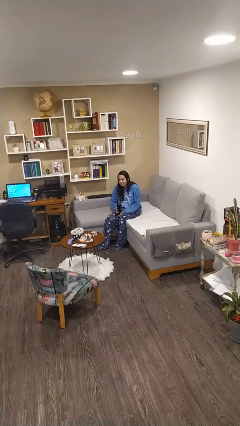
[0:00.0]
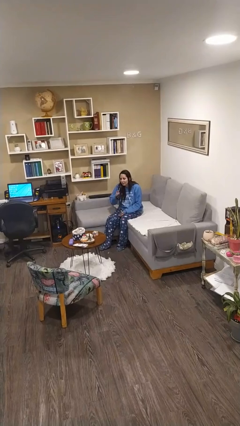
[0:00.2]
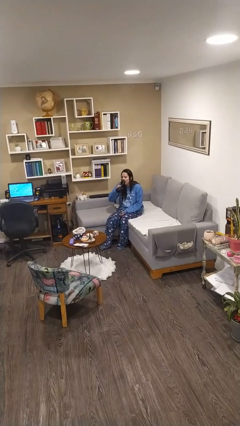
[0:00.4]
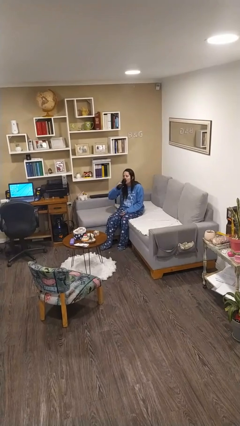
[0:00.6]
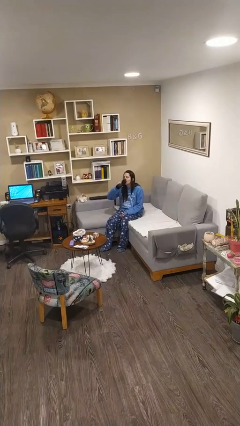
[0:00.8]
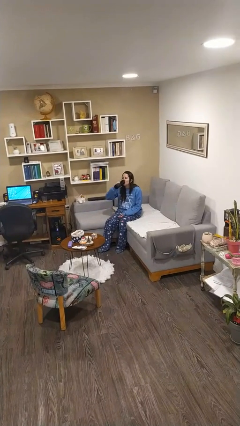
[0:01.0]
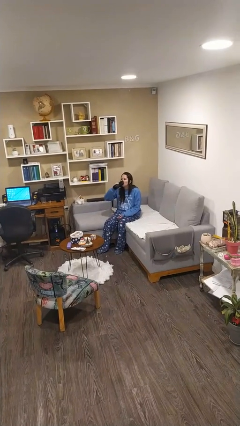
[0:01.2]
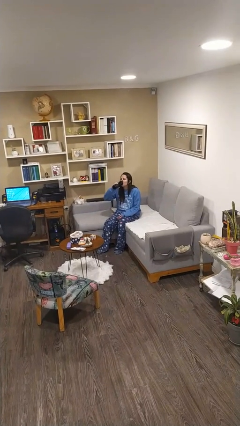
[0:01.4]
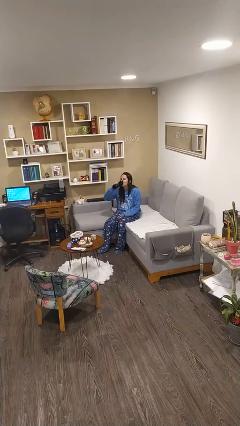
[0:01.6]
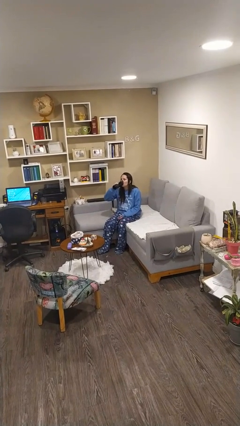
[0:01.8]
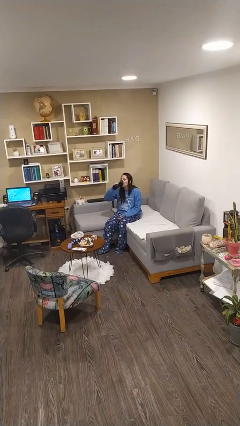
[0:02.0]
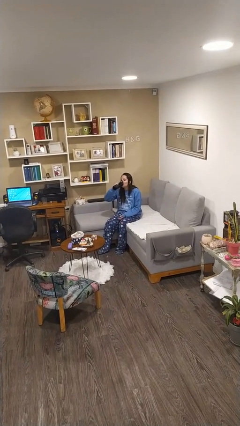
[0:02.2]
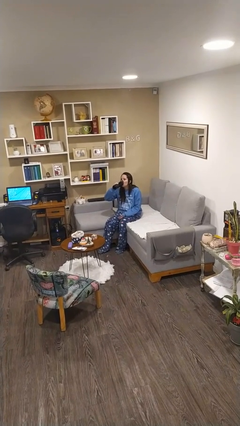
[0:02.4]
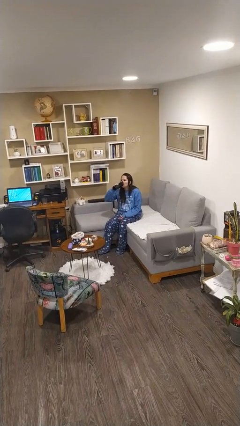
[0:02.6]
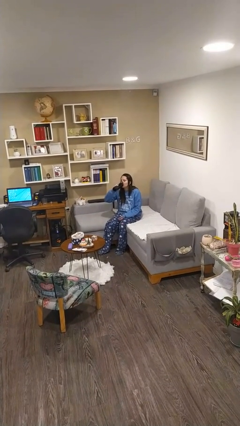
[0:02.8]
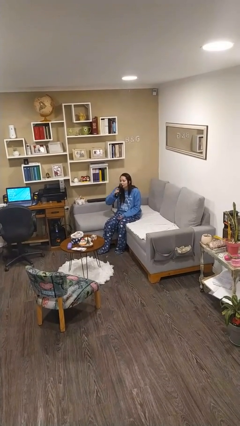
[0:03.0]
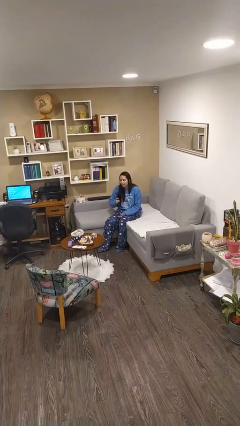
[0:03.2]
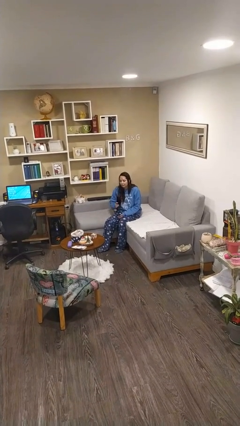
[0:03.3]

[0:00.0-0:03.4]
person drinks from bottle

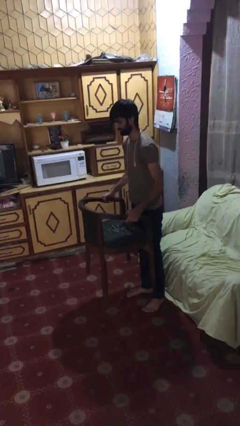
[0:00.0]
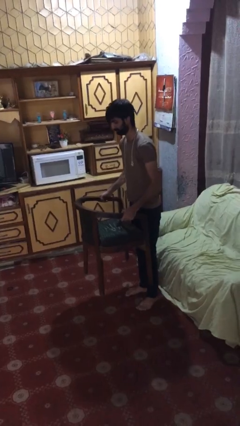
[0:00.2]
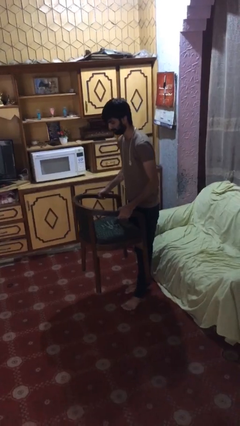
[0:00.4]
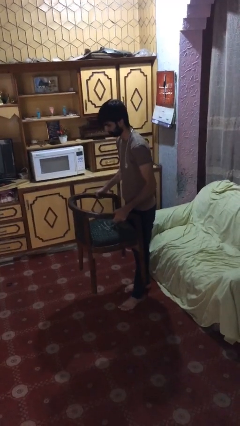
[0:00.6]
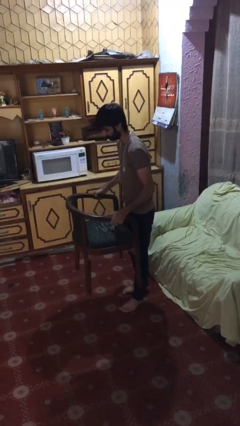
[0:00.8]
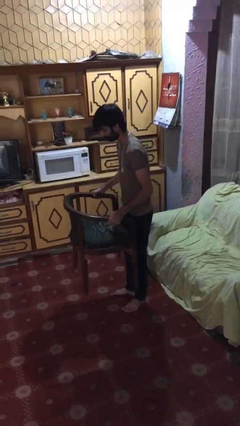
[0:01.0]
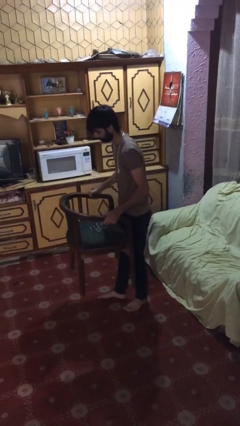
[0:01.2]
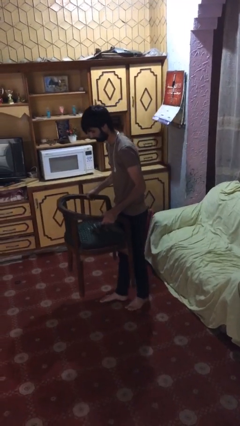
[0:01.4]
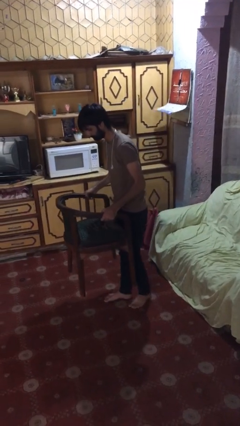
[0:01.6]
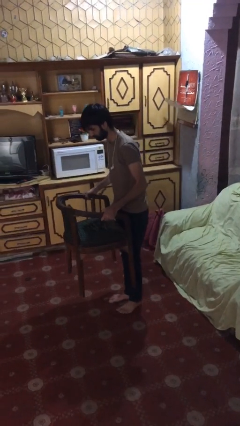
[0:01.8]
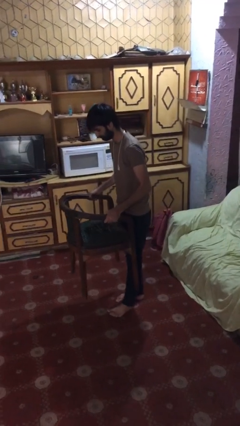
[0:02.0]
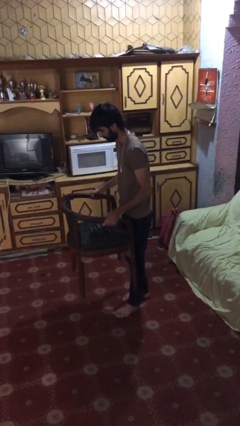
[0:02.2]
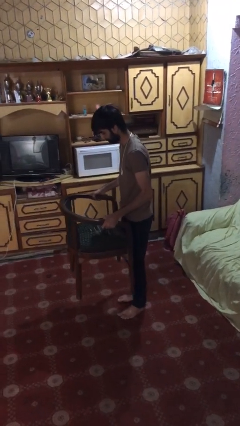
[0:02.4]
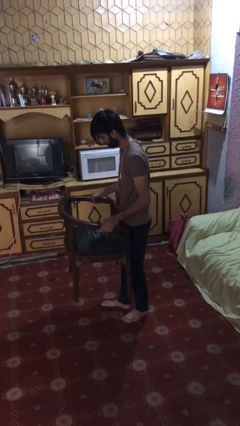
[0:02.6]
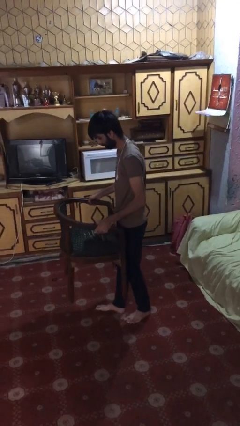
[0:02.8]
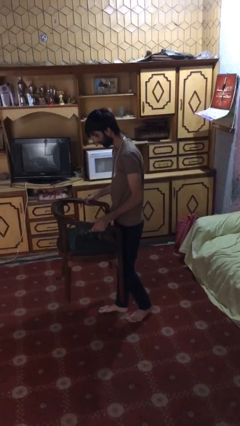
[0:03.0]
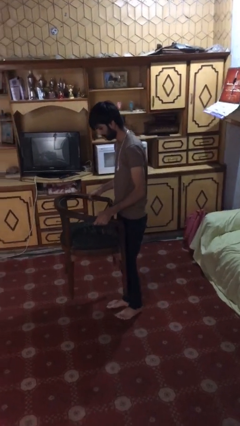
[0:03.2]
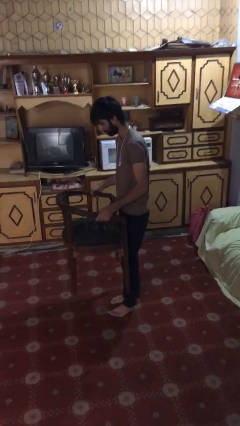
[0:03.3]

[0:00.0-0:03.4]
person carries heavy object

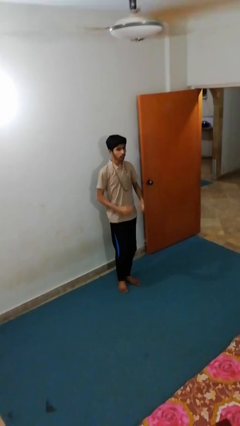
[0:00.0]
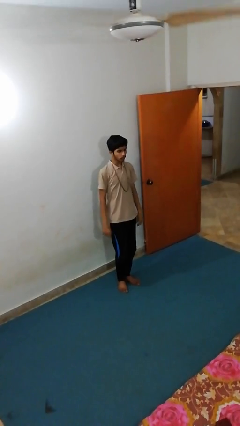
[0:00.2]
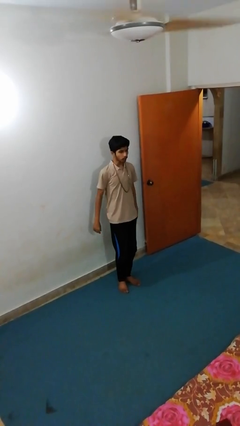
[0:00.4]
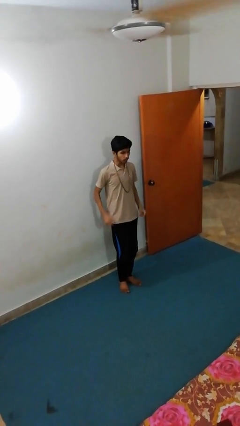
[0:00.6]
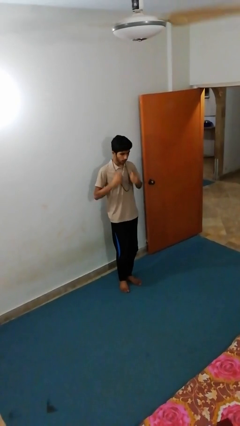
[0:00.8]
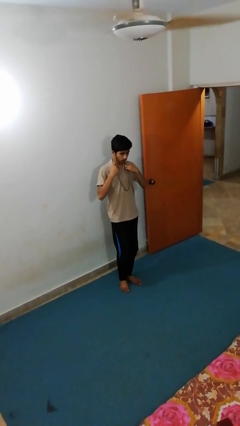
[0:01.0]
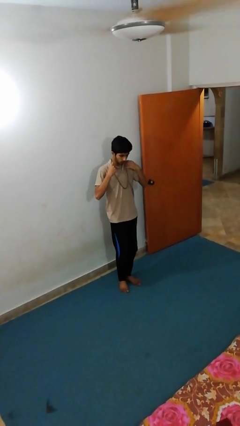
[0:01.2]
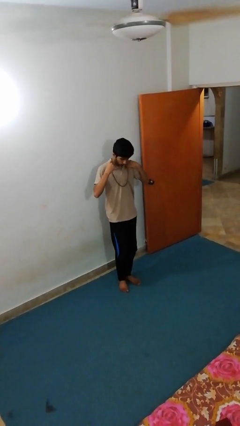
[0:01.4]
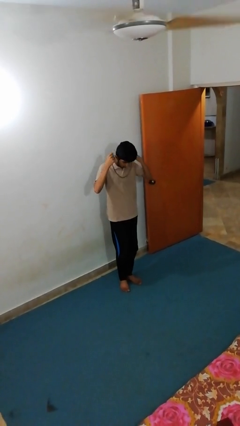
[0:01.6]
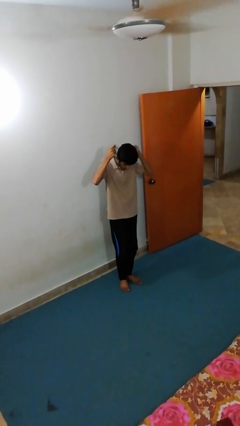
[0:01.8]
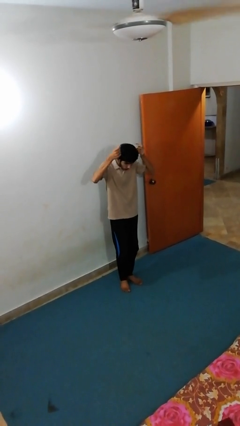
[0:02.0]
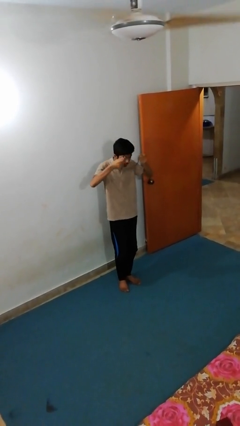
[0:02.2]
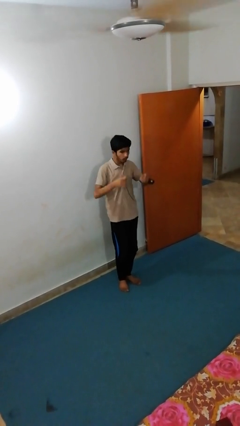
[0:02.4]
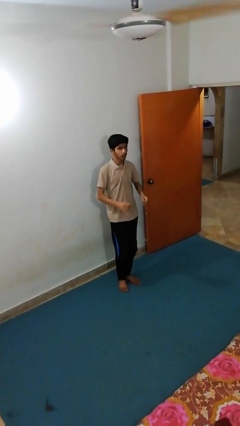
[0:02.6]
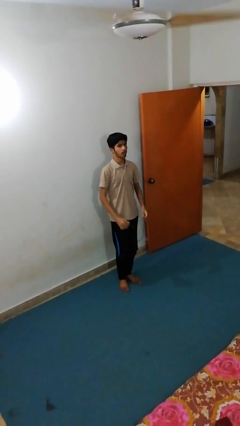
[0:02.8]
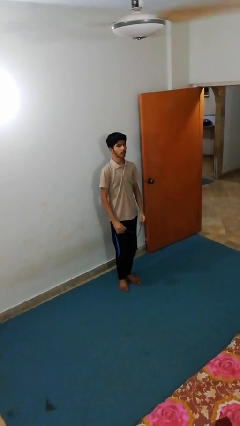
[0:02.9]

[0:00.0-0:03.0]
person takes off necklace

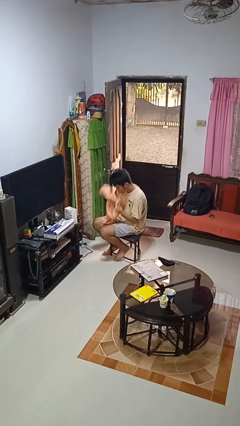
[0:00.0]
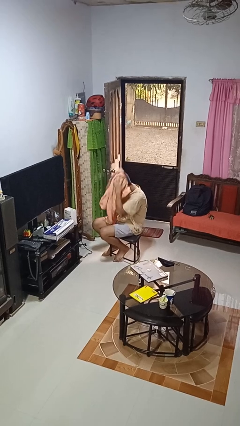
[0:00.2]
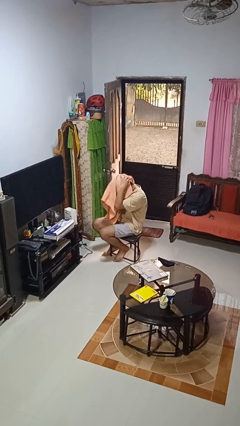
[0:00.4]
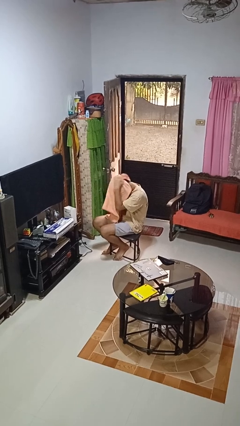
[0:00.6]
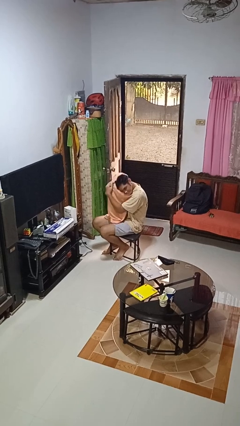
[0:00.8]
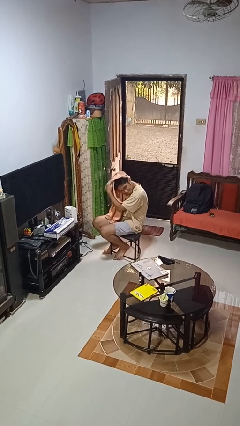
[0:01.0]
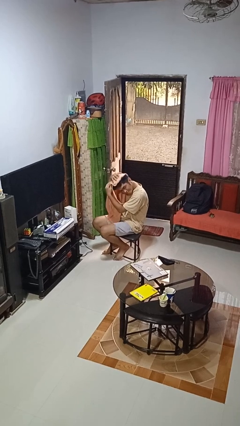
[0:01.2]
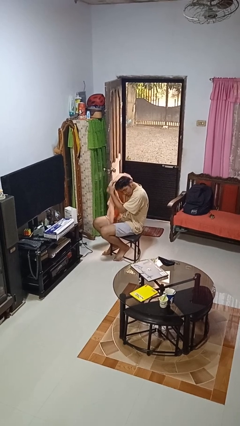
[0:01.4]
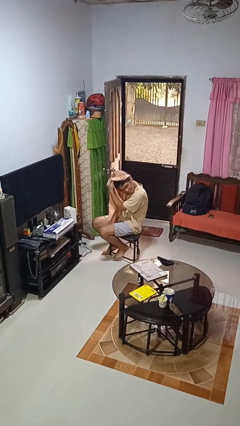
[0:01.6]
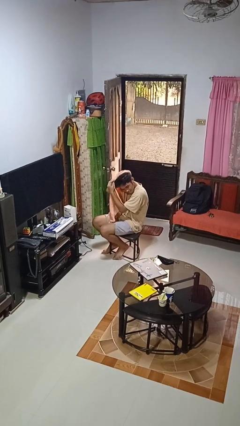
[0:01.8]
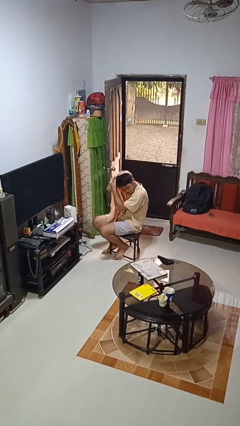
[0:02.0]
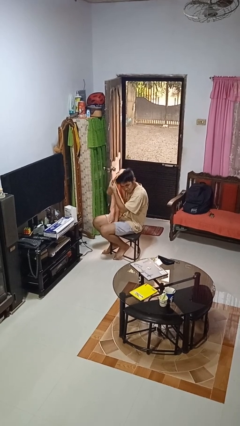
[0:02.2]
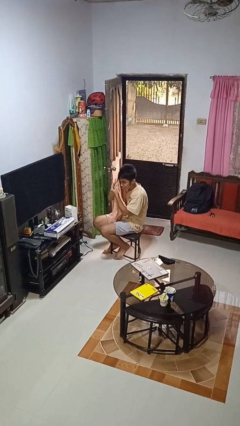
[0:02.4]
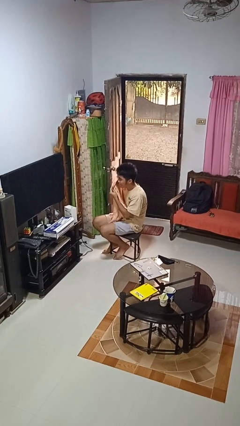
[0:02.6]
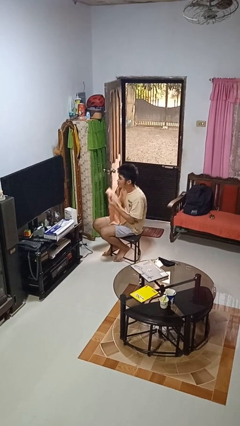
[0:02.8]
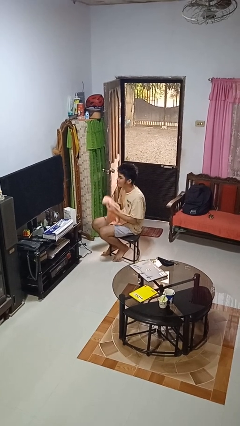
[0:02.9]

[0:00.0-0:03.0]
person dries hair with towel

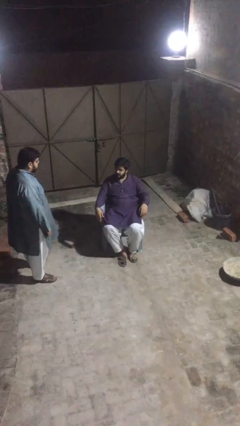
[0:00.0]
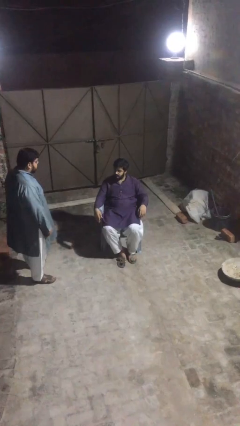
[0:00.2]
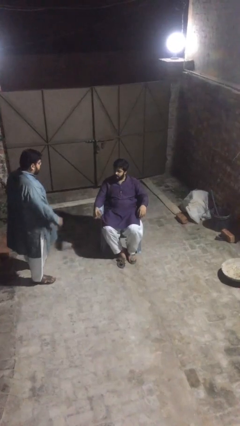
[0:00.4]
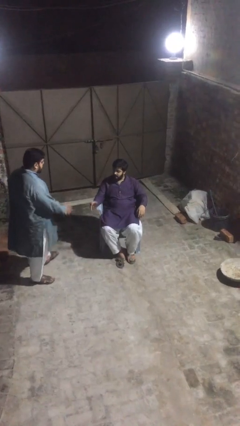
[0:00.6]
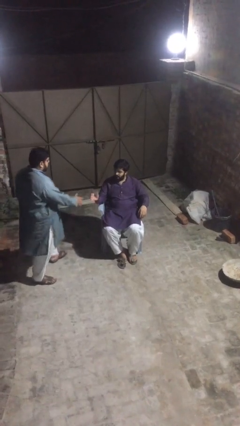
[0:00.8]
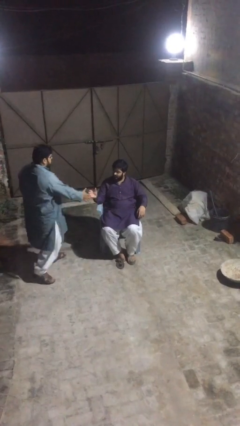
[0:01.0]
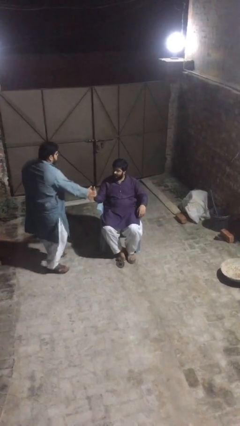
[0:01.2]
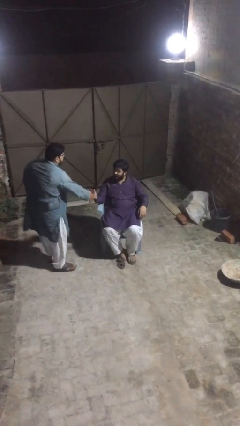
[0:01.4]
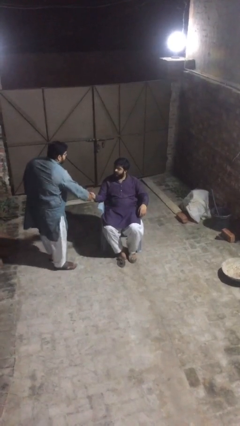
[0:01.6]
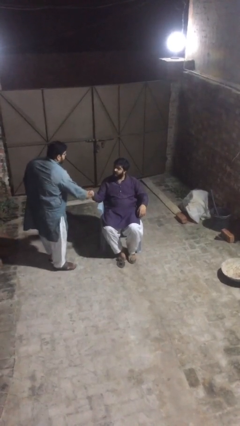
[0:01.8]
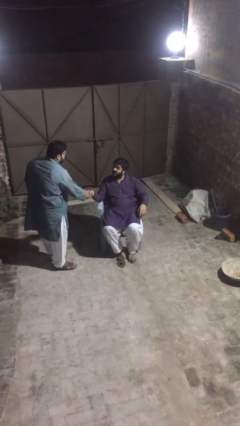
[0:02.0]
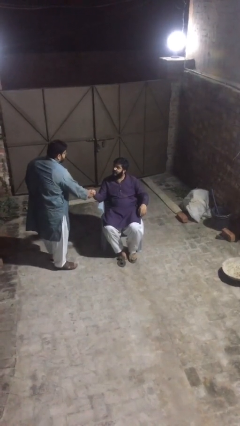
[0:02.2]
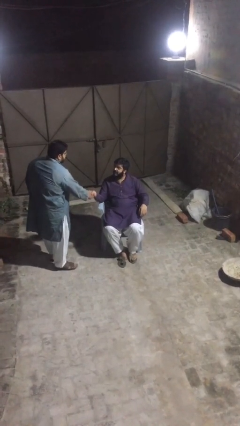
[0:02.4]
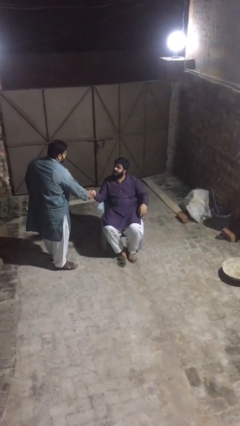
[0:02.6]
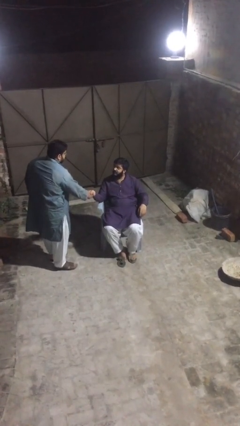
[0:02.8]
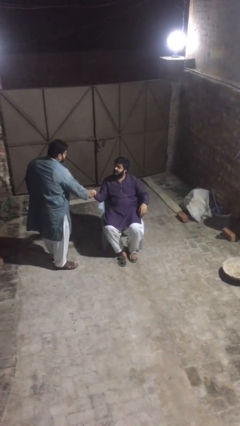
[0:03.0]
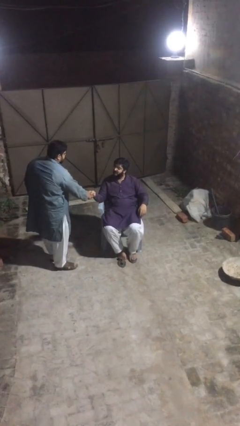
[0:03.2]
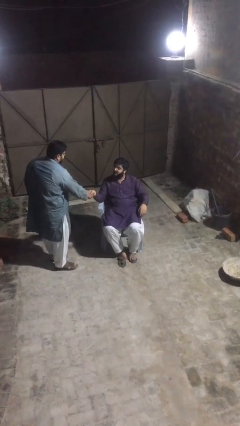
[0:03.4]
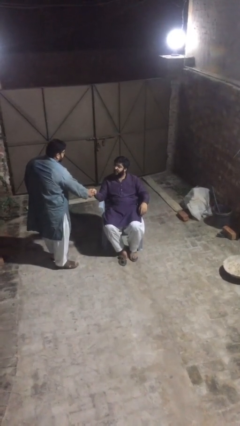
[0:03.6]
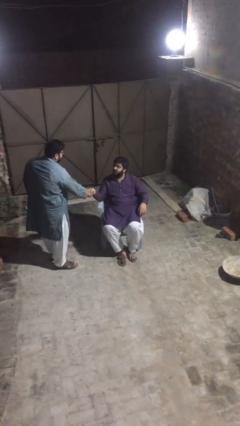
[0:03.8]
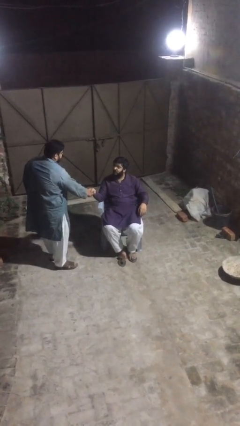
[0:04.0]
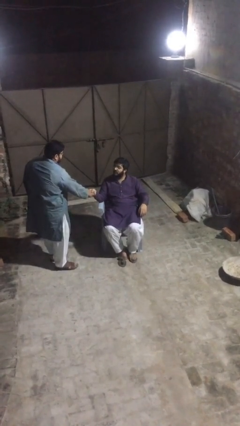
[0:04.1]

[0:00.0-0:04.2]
person shakes hand

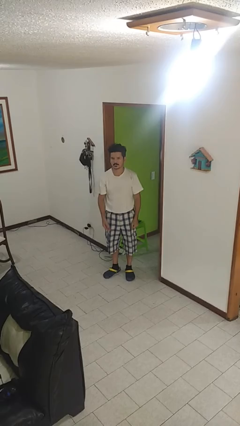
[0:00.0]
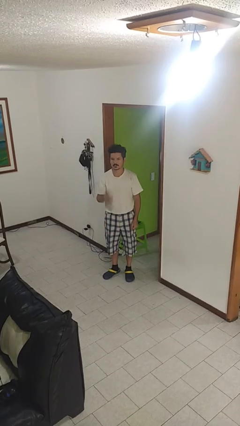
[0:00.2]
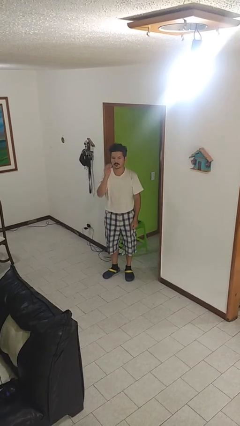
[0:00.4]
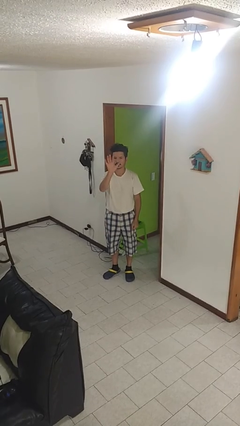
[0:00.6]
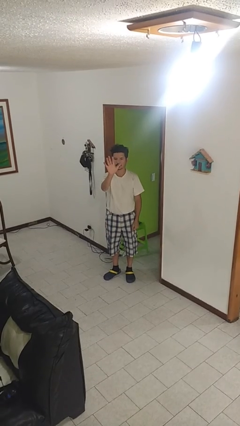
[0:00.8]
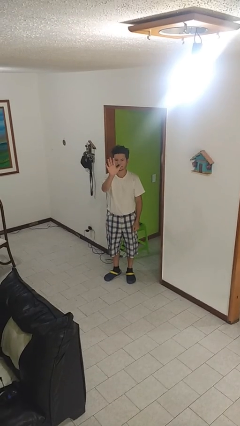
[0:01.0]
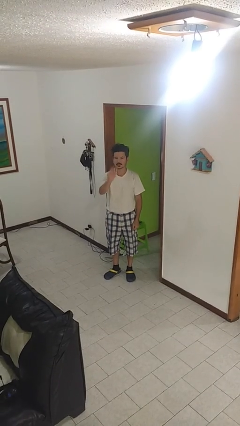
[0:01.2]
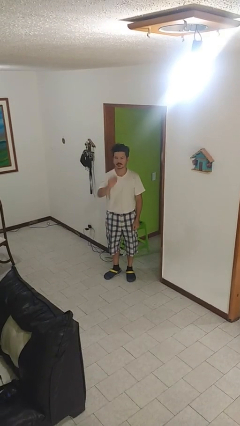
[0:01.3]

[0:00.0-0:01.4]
person gestures number five
